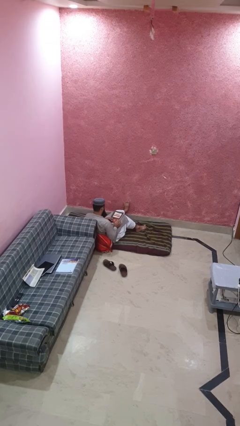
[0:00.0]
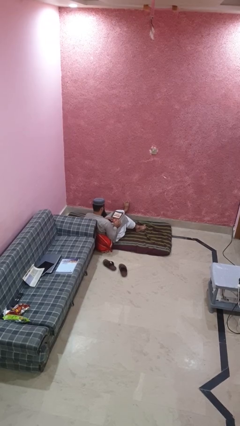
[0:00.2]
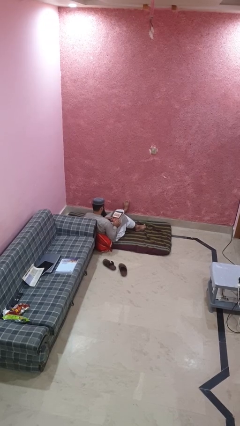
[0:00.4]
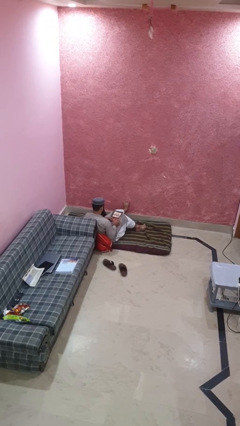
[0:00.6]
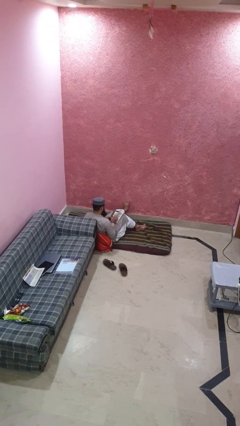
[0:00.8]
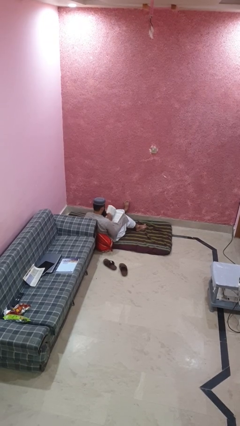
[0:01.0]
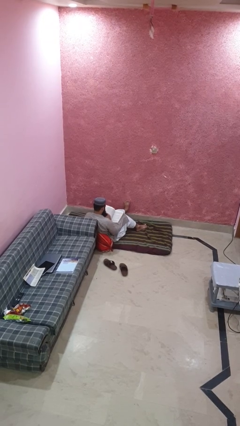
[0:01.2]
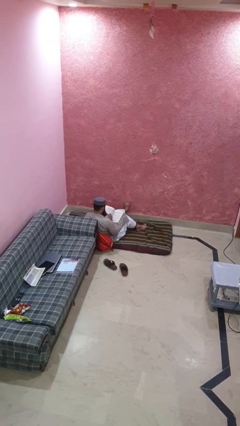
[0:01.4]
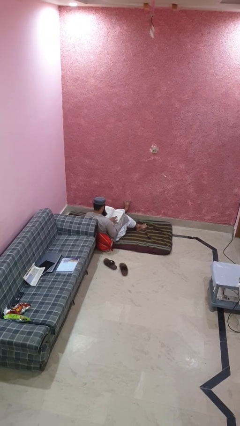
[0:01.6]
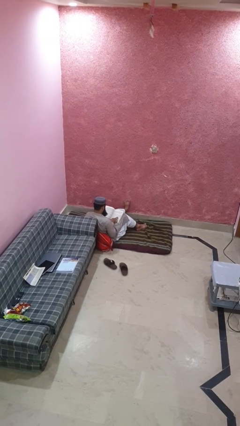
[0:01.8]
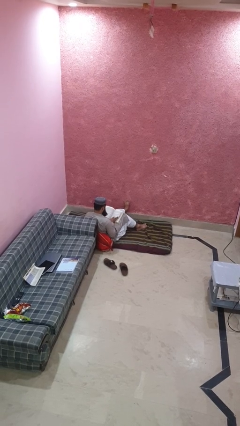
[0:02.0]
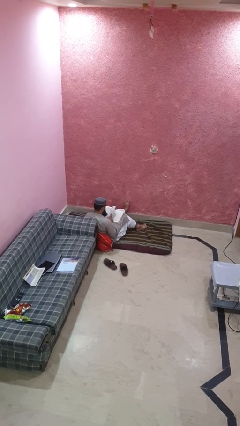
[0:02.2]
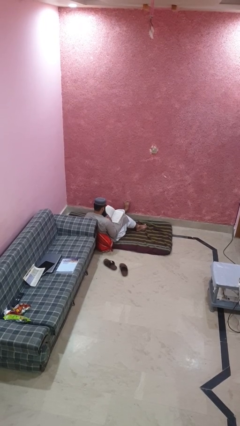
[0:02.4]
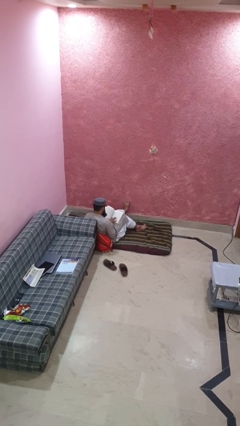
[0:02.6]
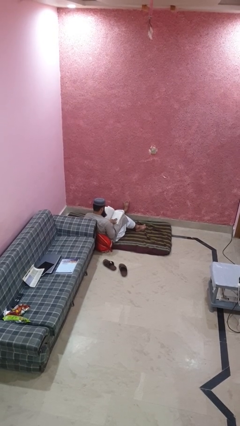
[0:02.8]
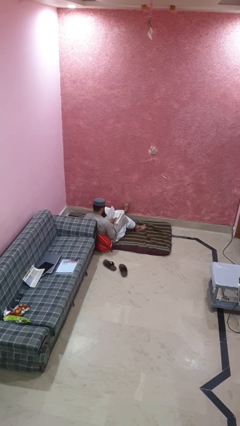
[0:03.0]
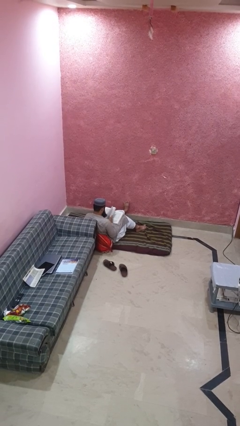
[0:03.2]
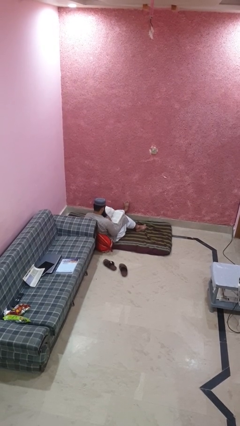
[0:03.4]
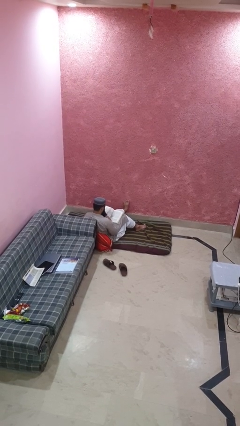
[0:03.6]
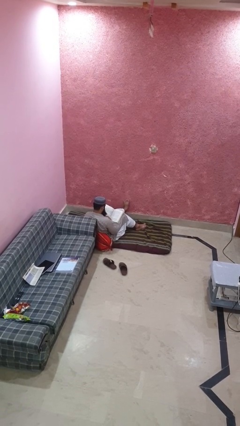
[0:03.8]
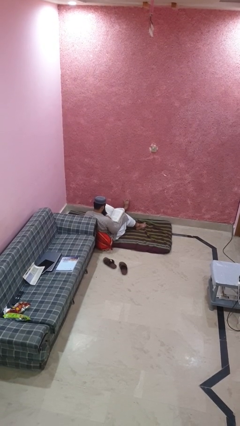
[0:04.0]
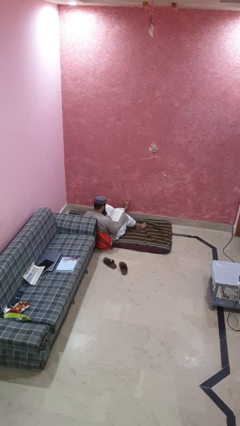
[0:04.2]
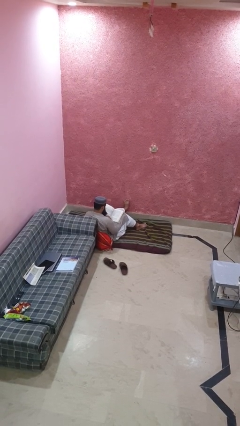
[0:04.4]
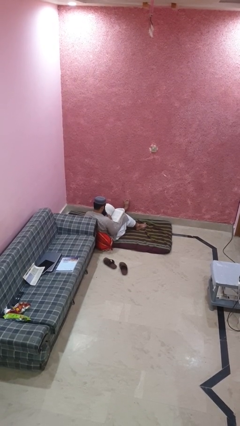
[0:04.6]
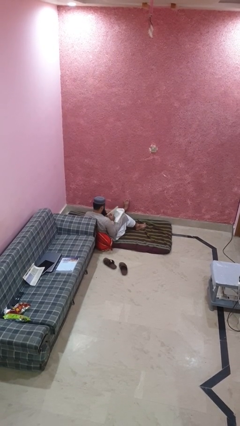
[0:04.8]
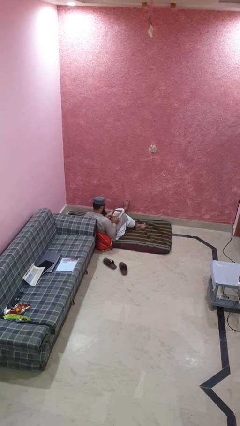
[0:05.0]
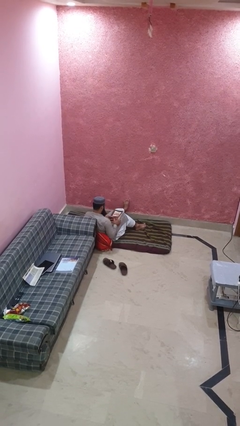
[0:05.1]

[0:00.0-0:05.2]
person reads book

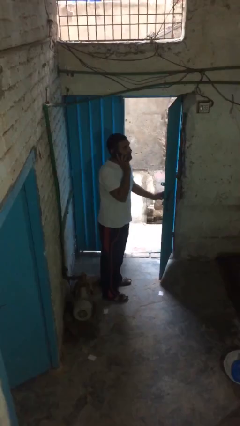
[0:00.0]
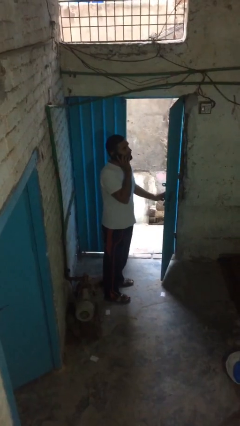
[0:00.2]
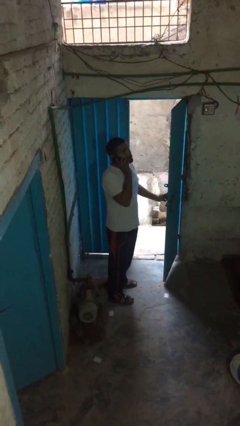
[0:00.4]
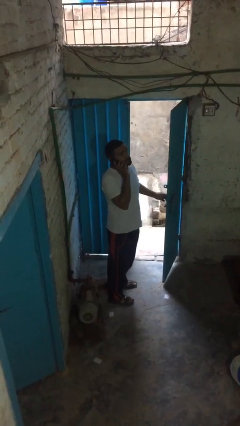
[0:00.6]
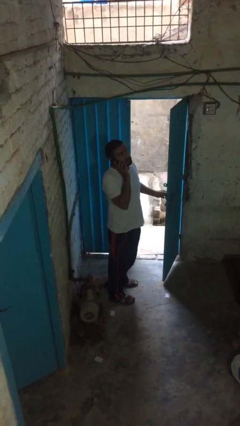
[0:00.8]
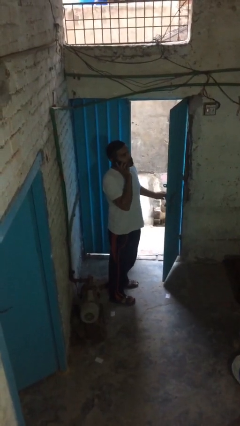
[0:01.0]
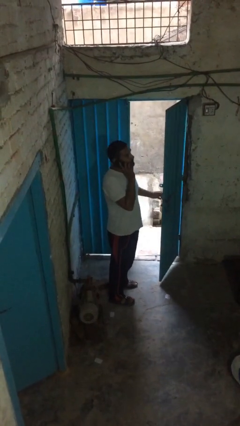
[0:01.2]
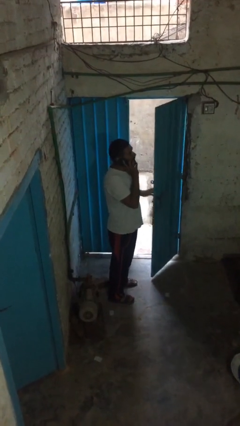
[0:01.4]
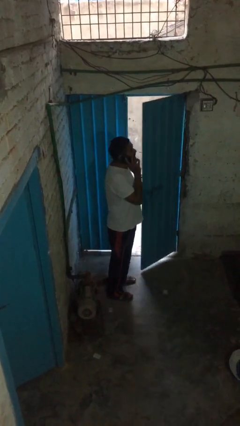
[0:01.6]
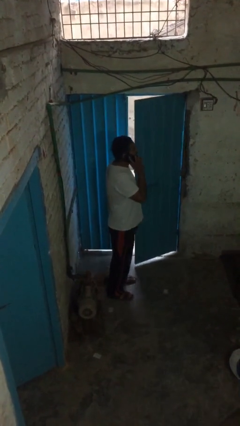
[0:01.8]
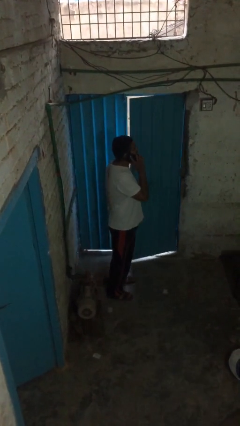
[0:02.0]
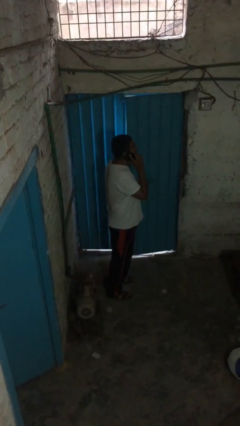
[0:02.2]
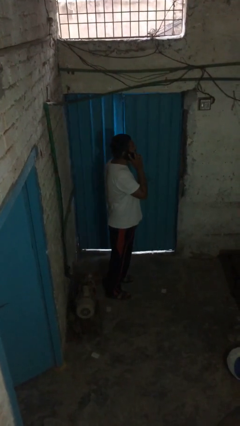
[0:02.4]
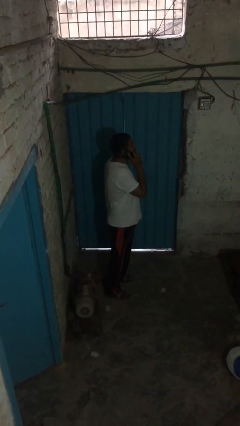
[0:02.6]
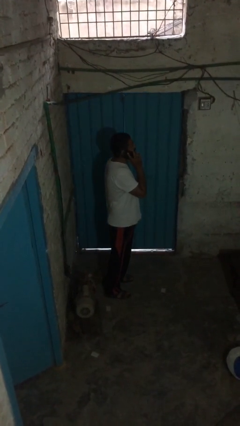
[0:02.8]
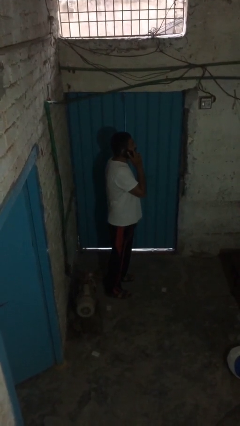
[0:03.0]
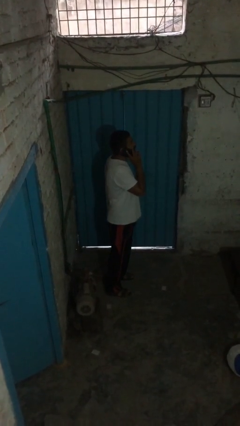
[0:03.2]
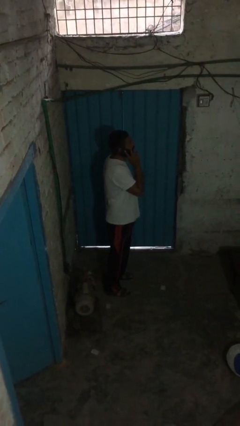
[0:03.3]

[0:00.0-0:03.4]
person closes facility door

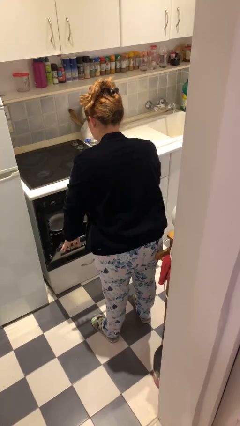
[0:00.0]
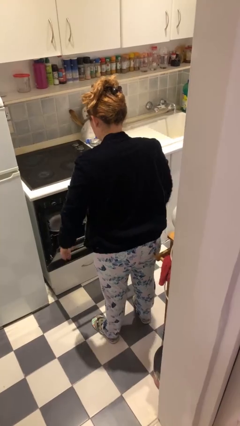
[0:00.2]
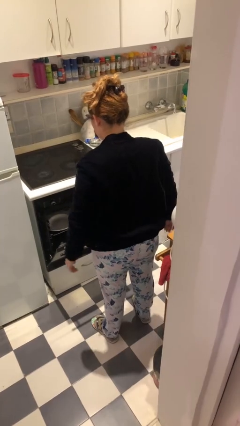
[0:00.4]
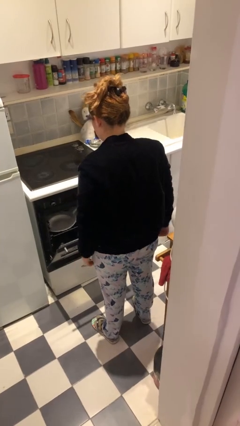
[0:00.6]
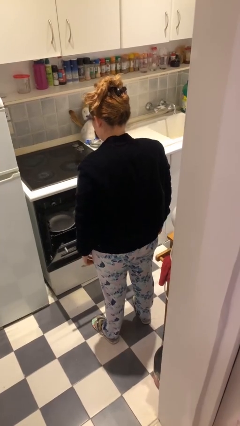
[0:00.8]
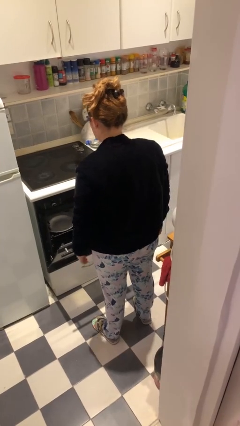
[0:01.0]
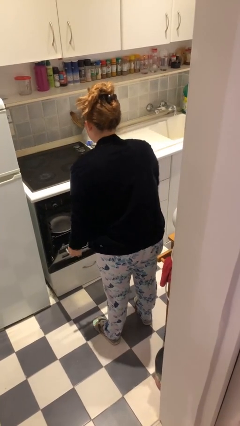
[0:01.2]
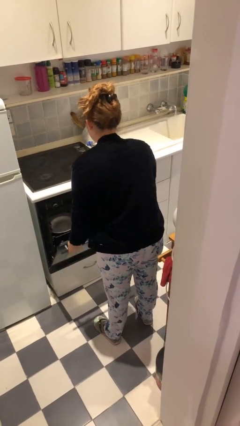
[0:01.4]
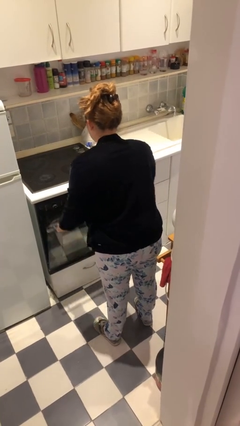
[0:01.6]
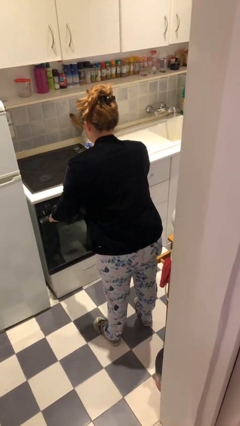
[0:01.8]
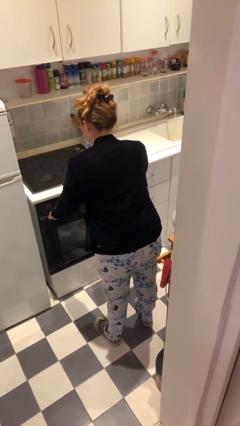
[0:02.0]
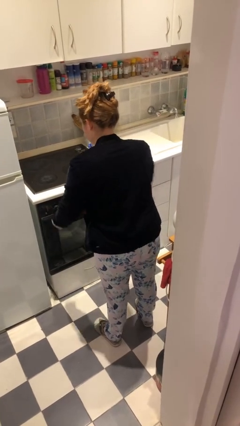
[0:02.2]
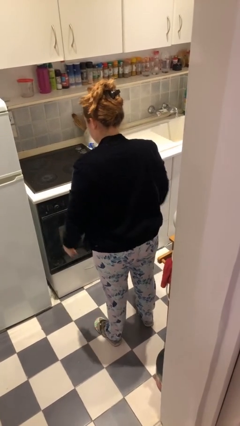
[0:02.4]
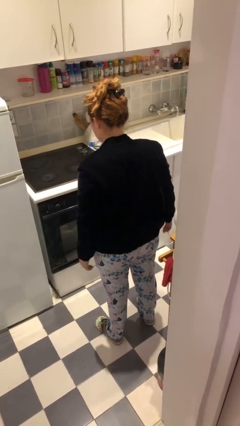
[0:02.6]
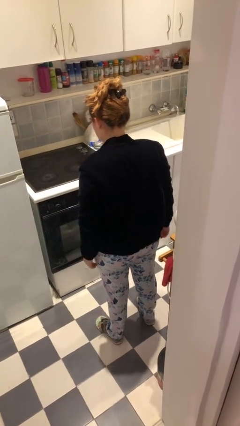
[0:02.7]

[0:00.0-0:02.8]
person closes dishwasher

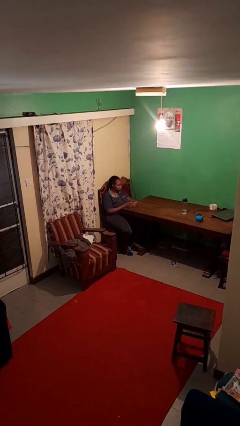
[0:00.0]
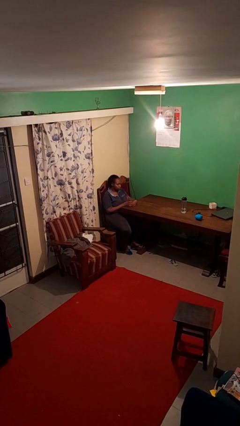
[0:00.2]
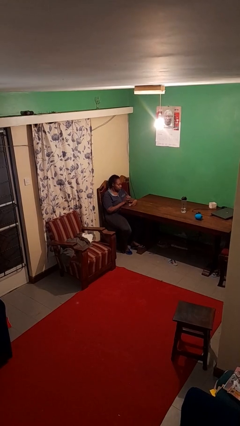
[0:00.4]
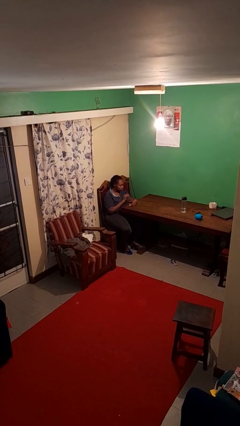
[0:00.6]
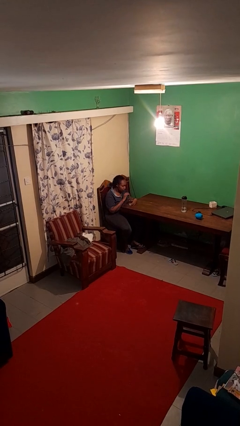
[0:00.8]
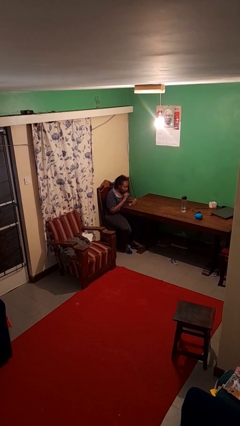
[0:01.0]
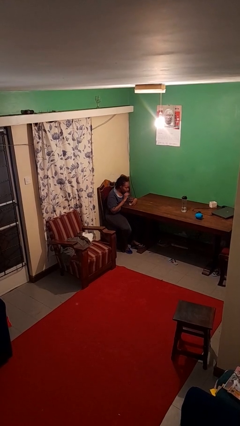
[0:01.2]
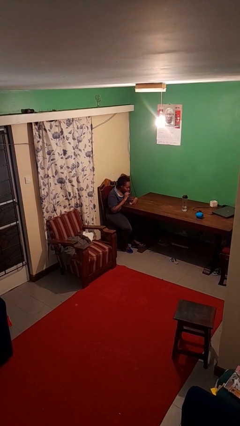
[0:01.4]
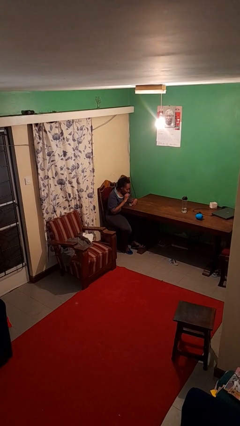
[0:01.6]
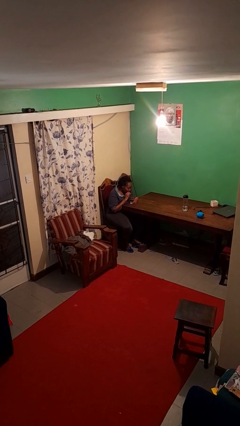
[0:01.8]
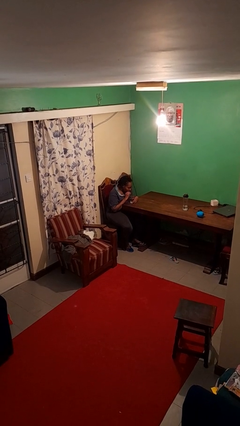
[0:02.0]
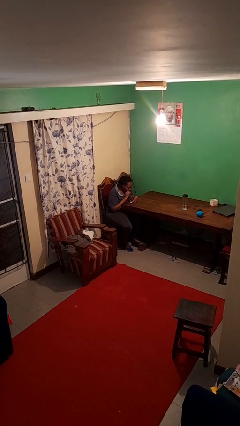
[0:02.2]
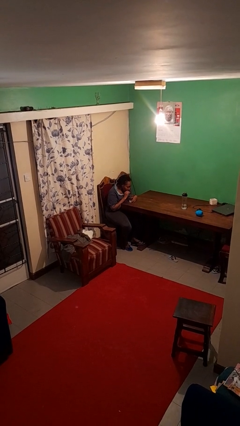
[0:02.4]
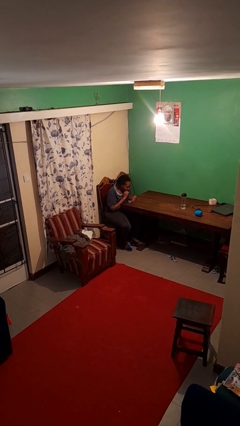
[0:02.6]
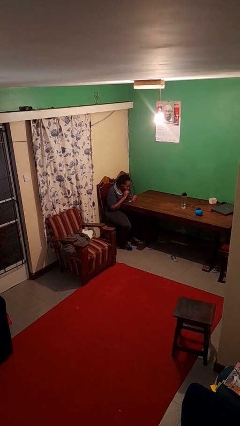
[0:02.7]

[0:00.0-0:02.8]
person drinks from straw

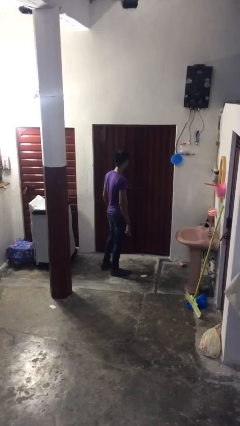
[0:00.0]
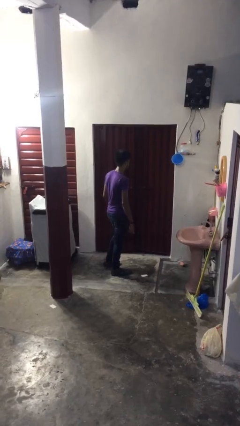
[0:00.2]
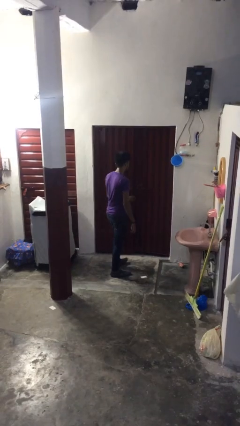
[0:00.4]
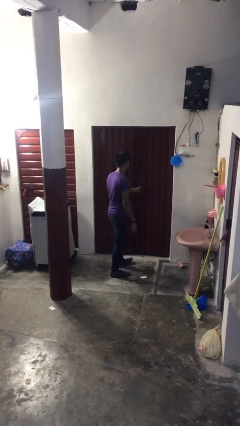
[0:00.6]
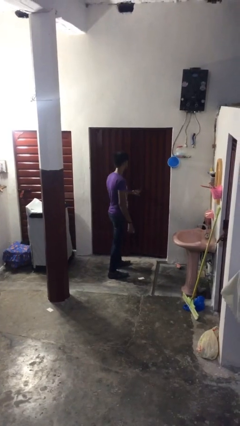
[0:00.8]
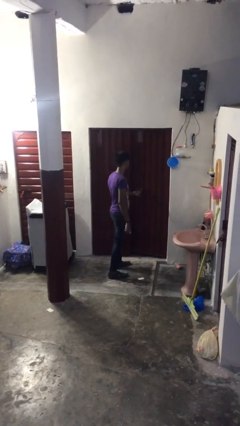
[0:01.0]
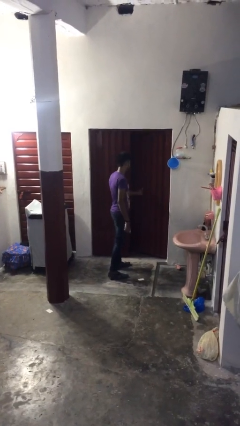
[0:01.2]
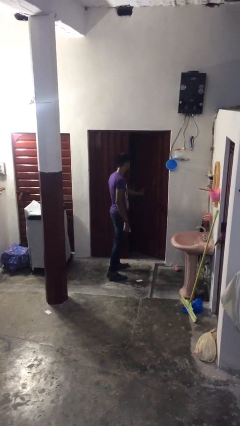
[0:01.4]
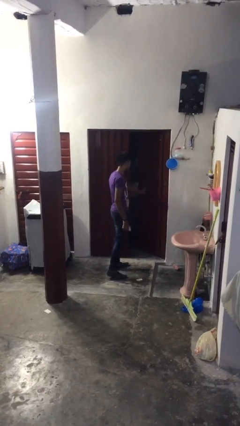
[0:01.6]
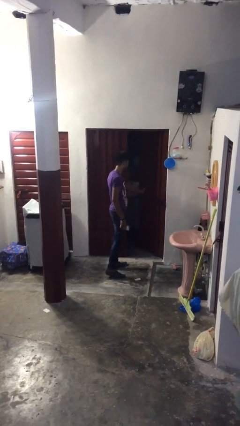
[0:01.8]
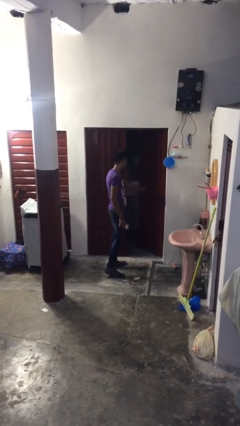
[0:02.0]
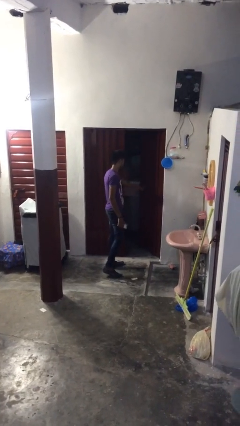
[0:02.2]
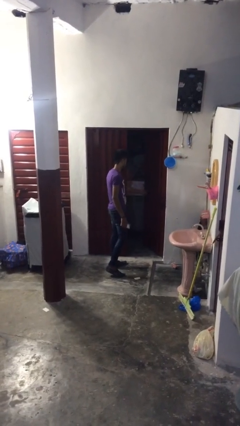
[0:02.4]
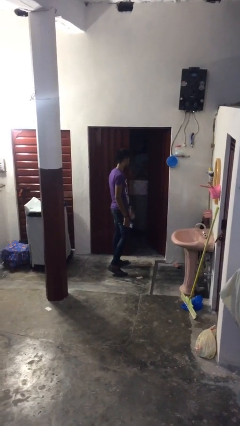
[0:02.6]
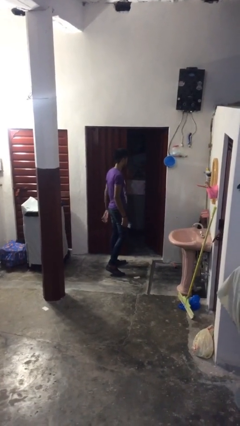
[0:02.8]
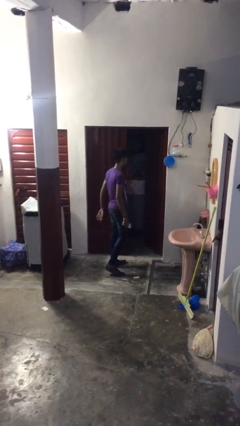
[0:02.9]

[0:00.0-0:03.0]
person opens facility door
